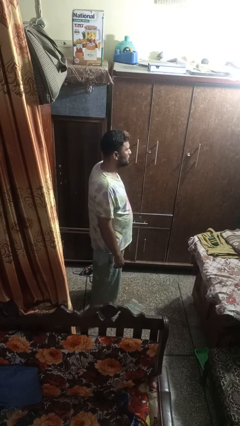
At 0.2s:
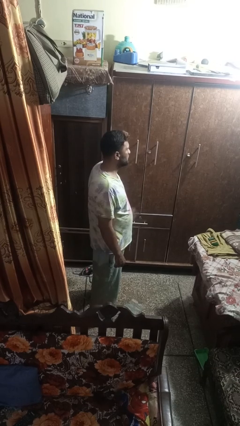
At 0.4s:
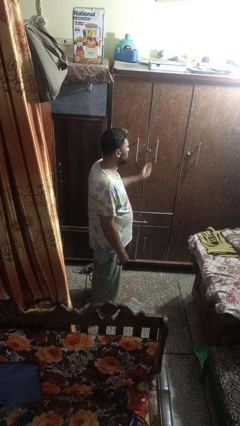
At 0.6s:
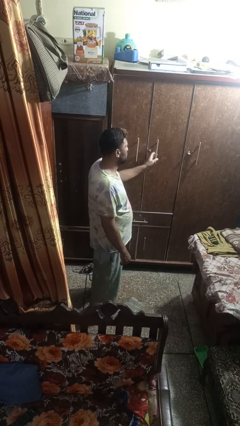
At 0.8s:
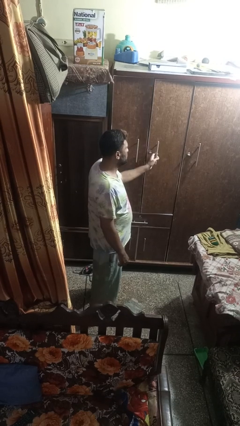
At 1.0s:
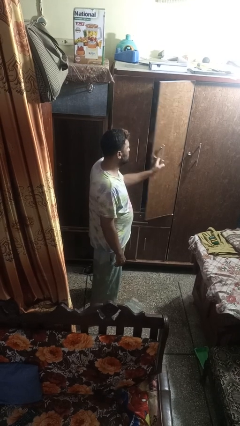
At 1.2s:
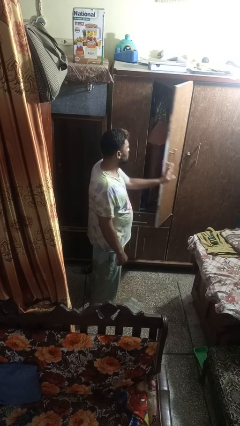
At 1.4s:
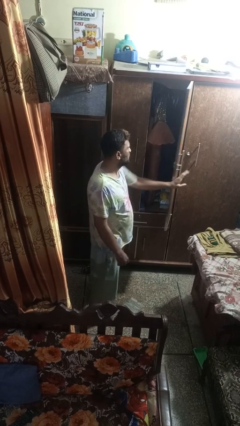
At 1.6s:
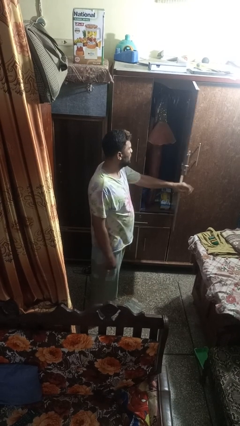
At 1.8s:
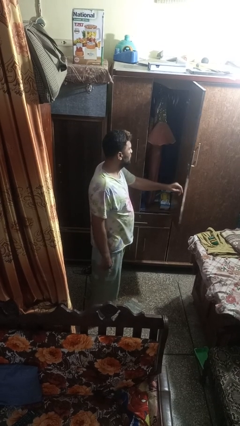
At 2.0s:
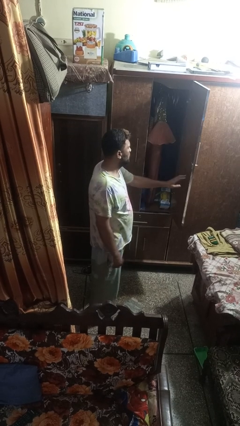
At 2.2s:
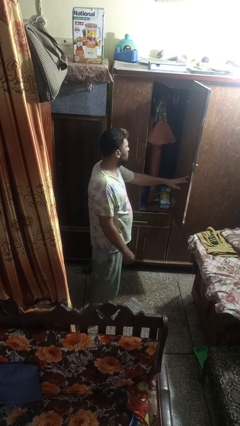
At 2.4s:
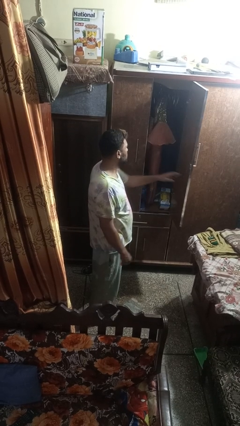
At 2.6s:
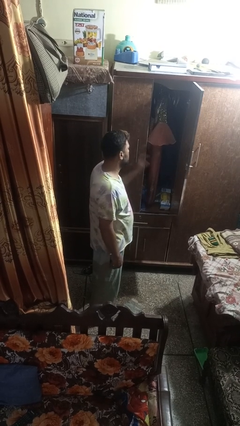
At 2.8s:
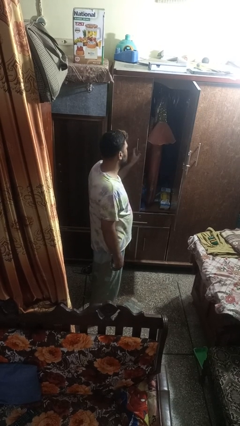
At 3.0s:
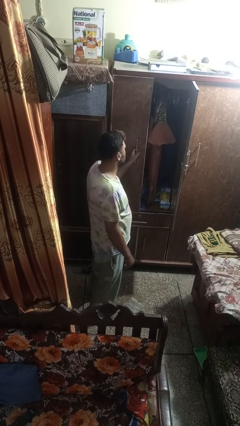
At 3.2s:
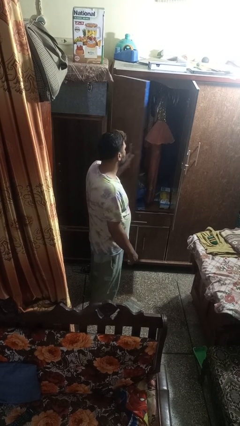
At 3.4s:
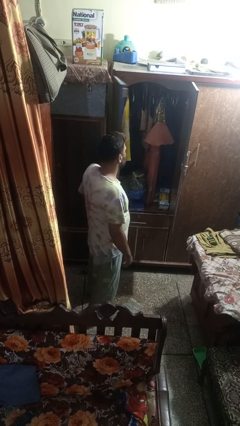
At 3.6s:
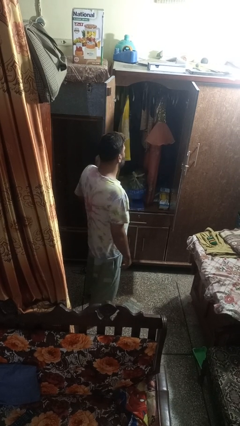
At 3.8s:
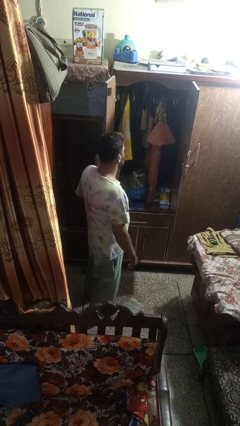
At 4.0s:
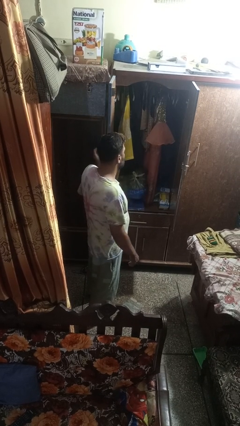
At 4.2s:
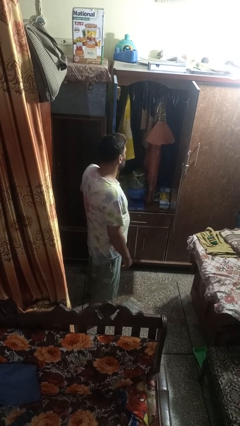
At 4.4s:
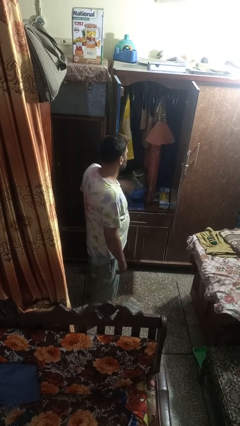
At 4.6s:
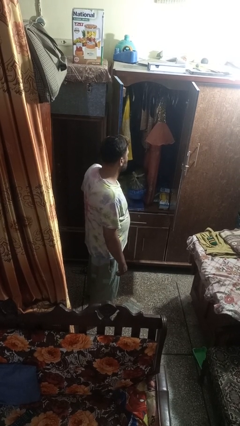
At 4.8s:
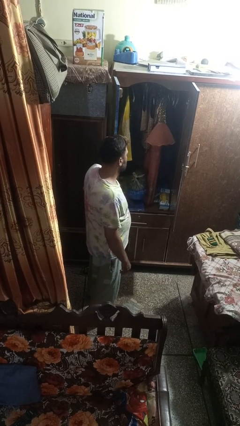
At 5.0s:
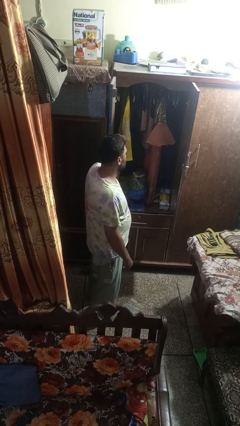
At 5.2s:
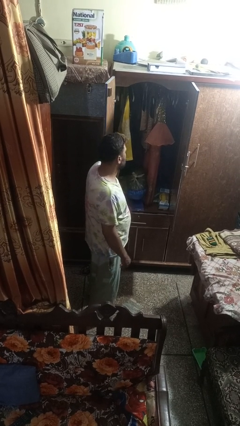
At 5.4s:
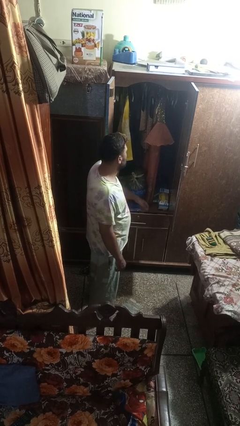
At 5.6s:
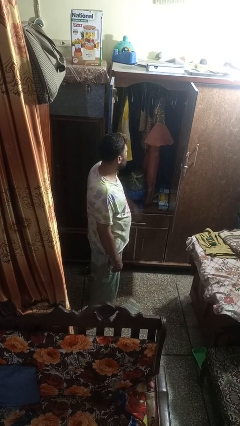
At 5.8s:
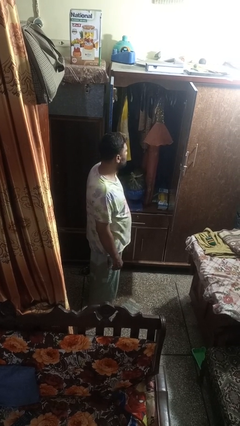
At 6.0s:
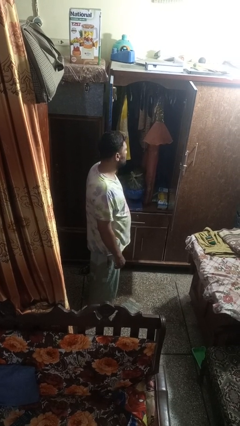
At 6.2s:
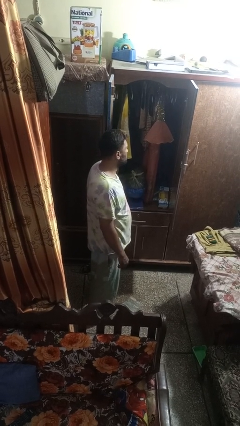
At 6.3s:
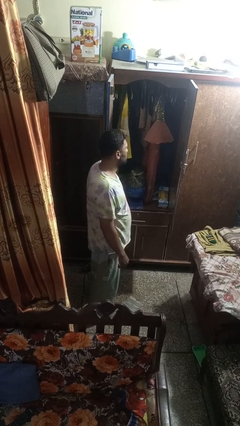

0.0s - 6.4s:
person opens closet door

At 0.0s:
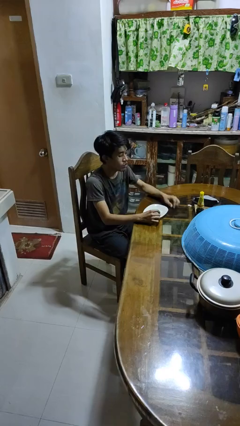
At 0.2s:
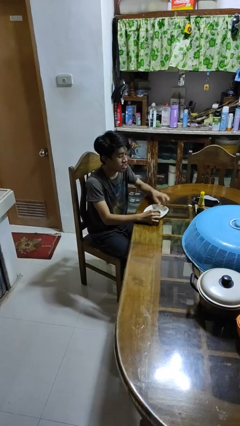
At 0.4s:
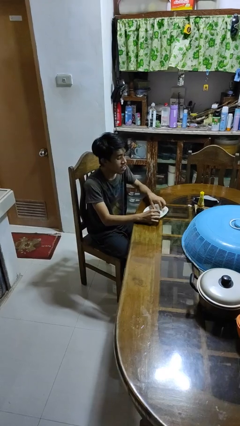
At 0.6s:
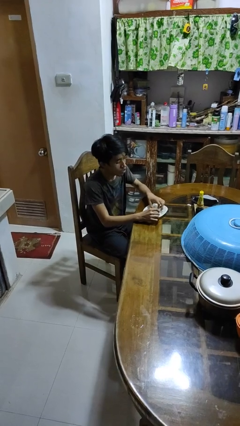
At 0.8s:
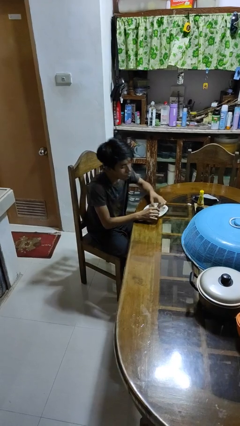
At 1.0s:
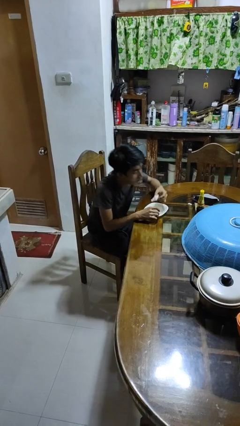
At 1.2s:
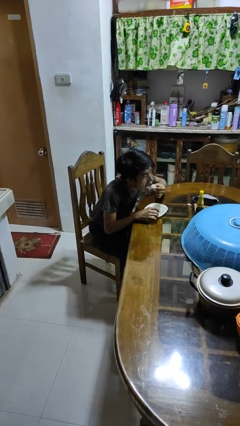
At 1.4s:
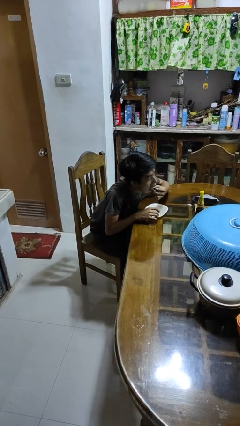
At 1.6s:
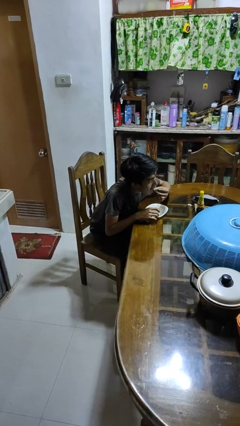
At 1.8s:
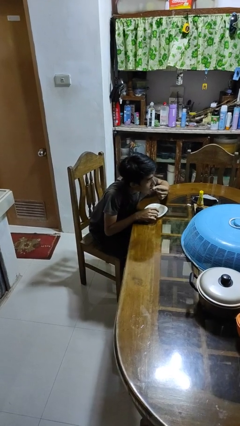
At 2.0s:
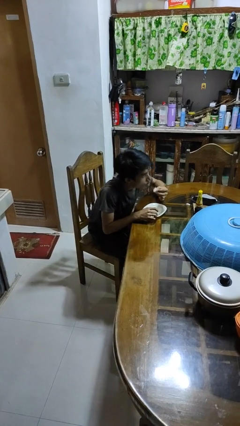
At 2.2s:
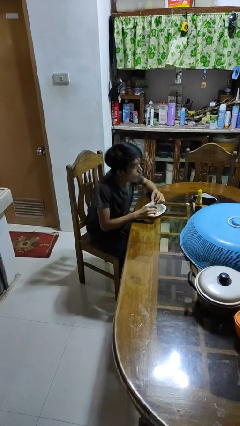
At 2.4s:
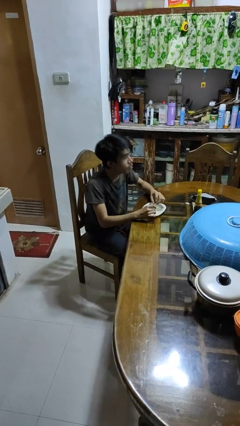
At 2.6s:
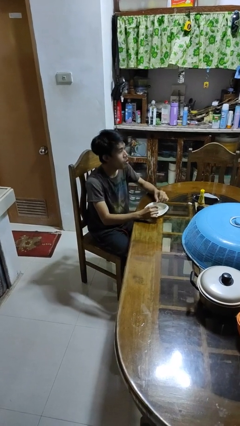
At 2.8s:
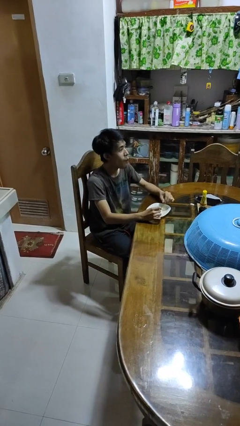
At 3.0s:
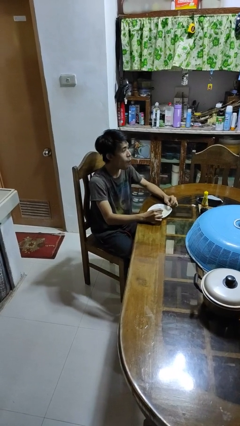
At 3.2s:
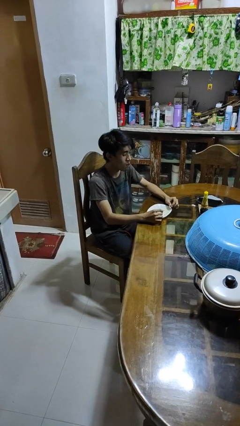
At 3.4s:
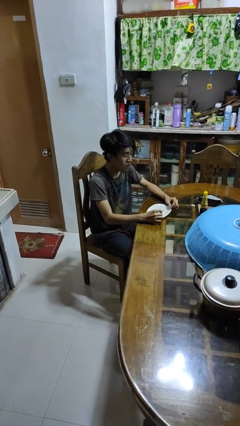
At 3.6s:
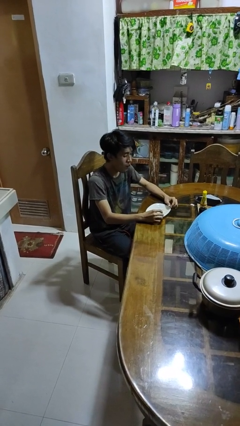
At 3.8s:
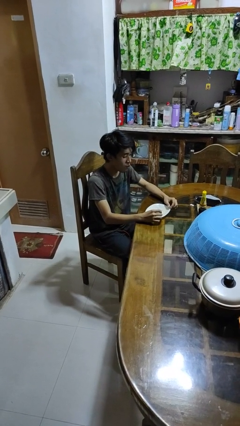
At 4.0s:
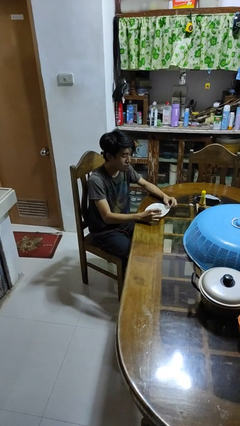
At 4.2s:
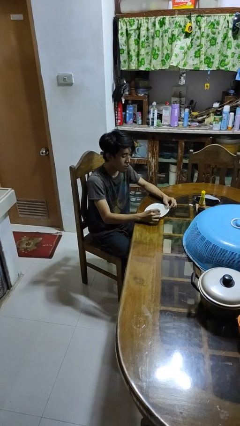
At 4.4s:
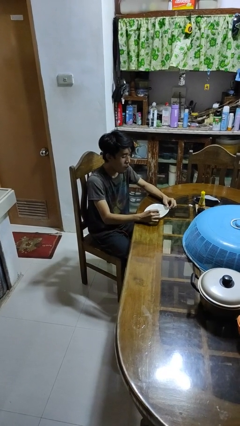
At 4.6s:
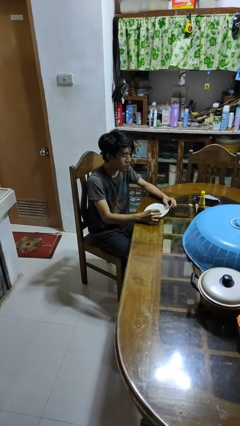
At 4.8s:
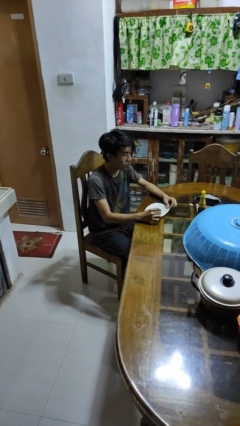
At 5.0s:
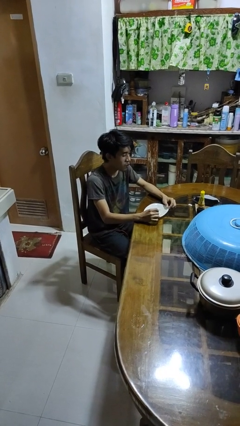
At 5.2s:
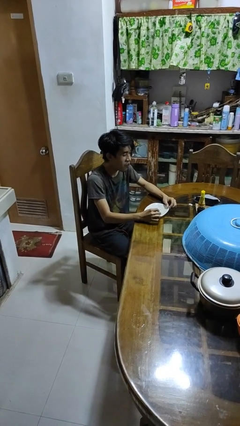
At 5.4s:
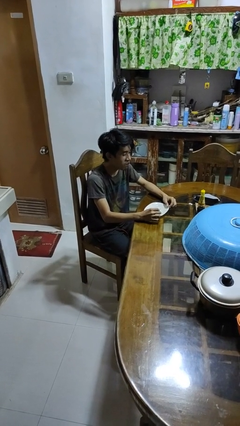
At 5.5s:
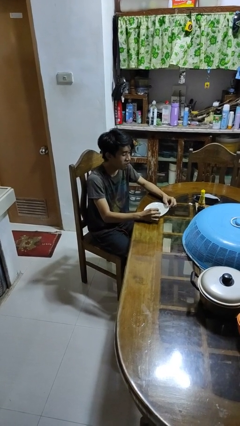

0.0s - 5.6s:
person eats with hands

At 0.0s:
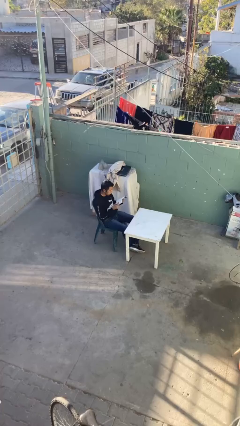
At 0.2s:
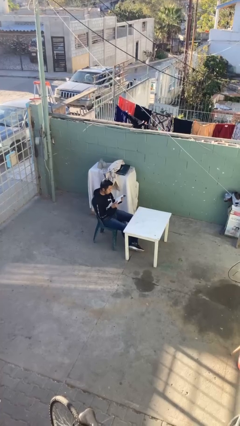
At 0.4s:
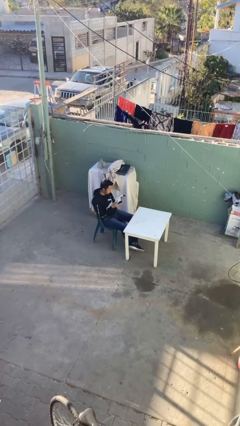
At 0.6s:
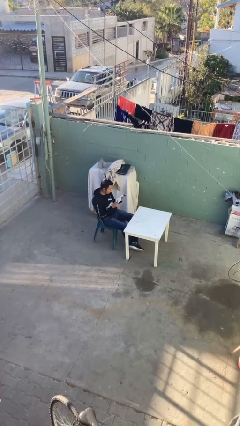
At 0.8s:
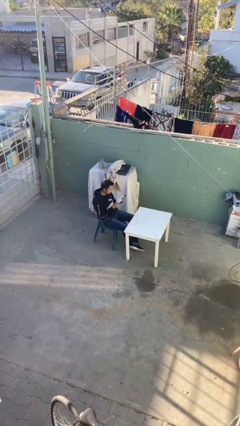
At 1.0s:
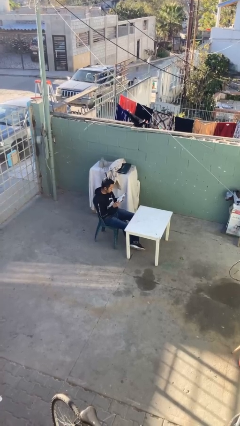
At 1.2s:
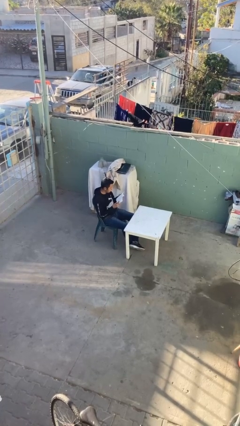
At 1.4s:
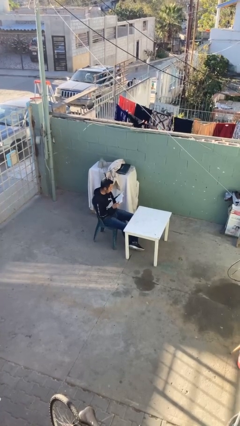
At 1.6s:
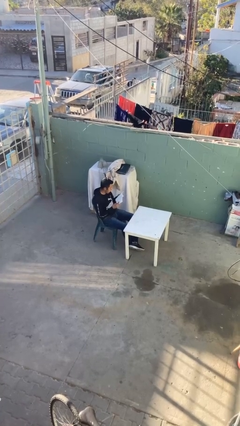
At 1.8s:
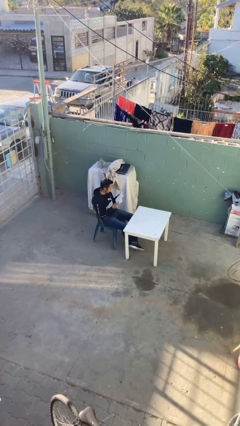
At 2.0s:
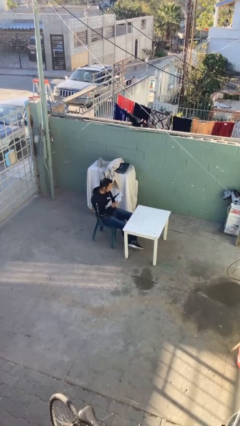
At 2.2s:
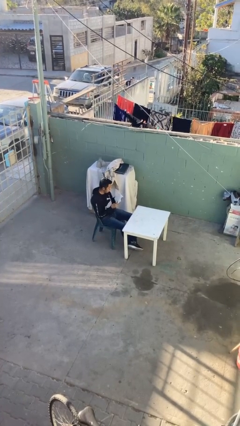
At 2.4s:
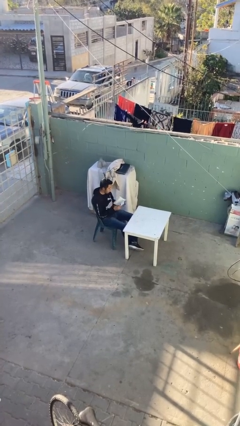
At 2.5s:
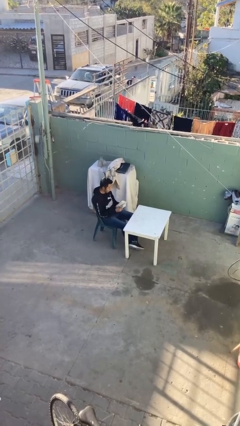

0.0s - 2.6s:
person reads document

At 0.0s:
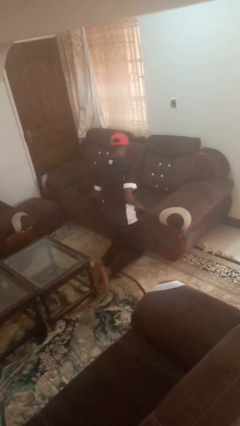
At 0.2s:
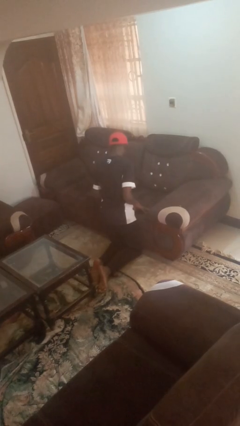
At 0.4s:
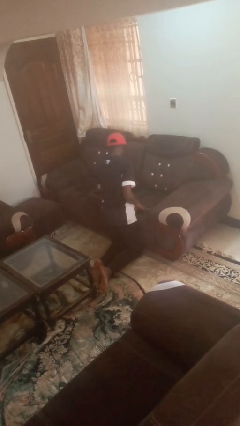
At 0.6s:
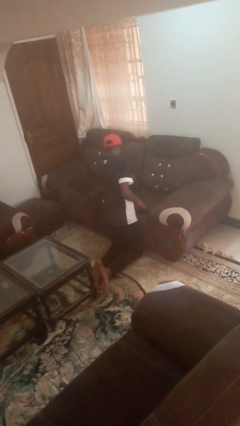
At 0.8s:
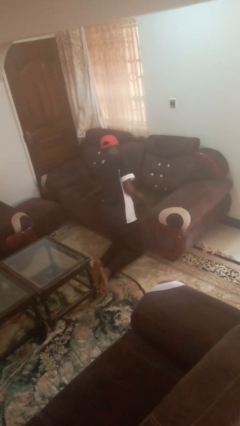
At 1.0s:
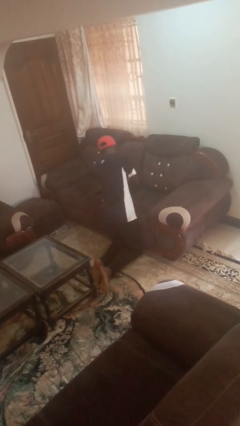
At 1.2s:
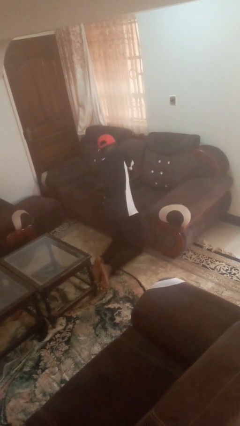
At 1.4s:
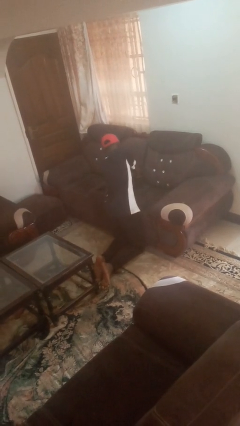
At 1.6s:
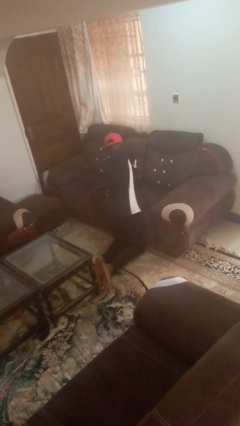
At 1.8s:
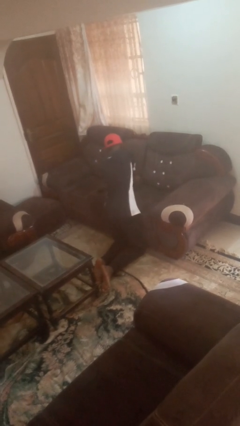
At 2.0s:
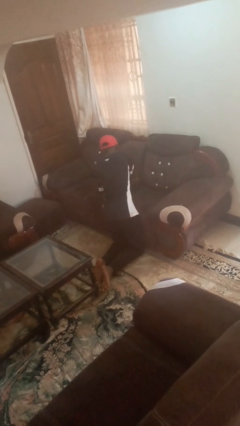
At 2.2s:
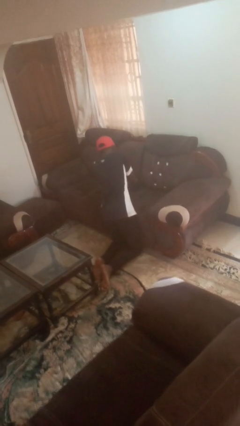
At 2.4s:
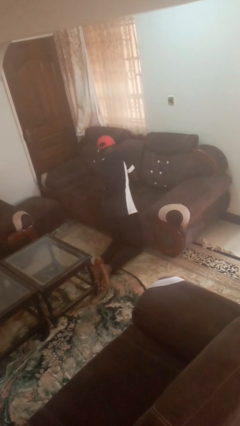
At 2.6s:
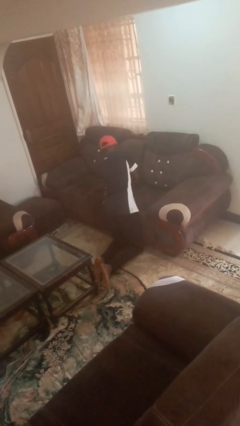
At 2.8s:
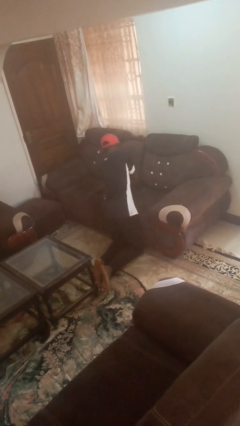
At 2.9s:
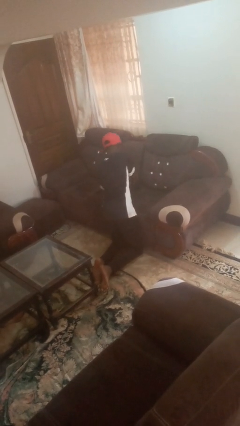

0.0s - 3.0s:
person searches in couch

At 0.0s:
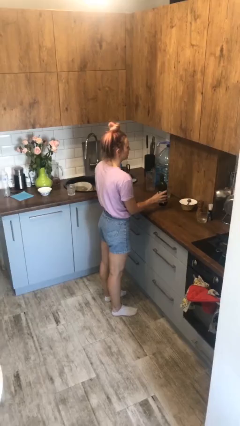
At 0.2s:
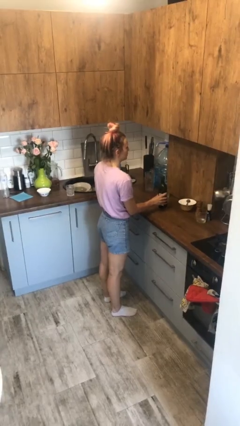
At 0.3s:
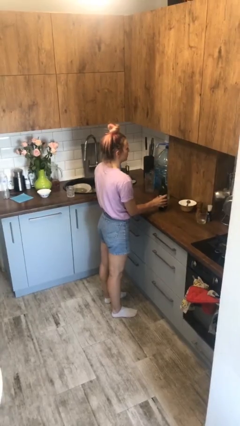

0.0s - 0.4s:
person puts down object on countertop
